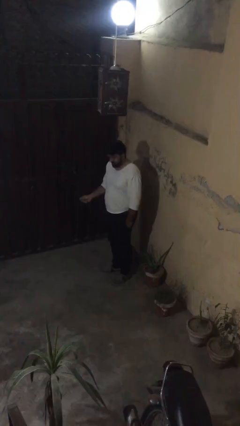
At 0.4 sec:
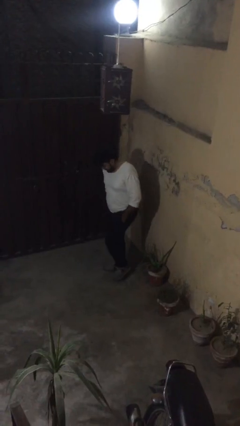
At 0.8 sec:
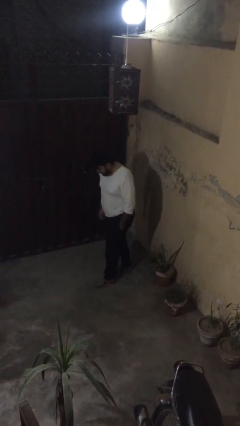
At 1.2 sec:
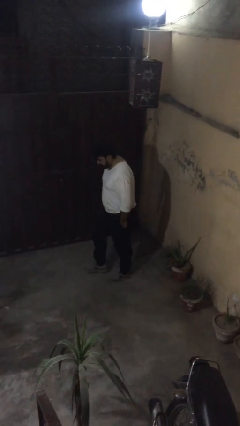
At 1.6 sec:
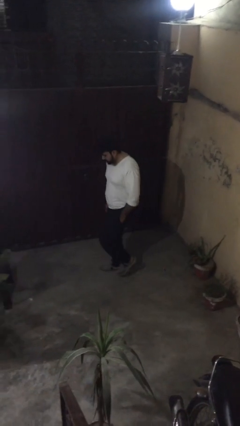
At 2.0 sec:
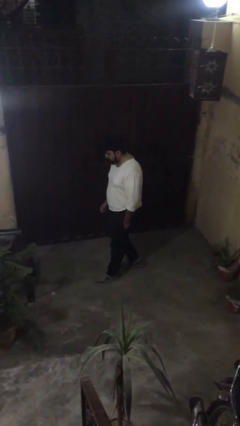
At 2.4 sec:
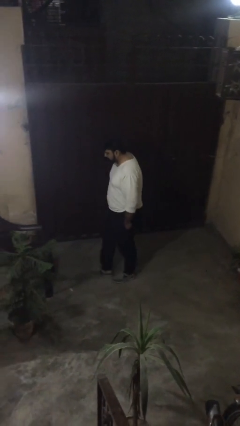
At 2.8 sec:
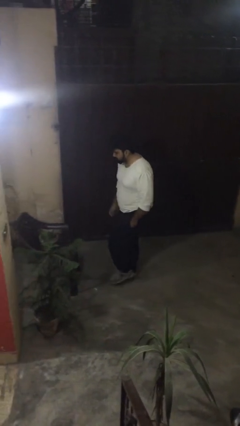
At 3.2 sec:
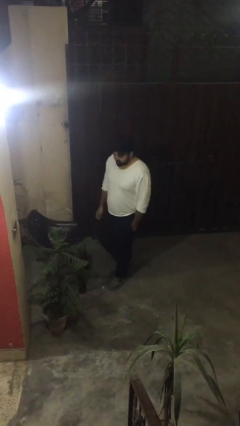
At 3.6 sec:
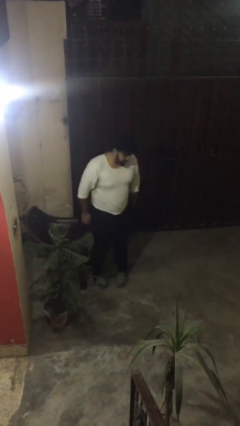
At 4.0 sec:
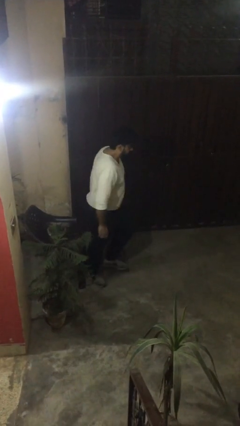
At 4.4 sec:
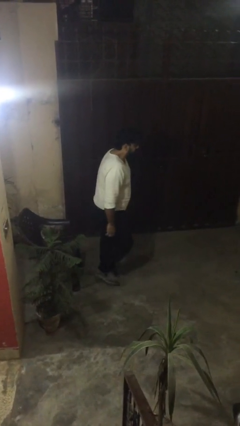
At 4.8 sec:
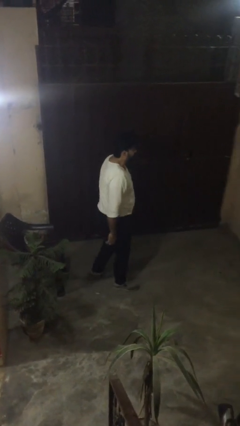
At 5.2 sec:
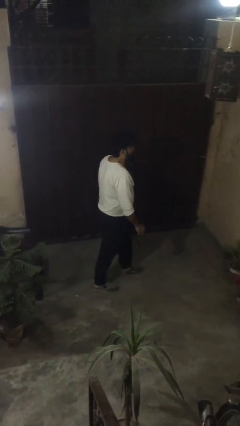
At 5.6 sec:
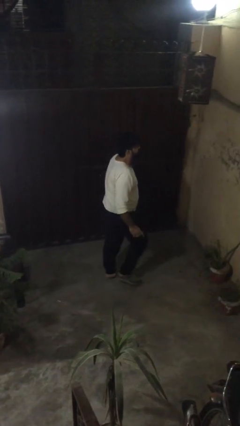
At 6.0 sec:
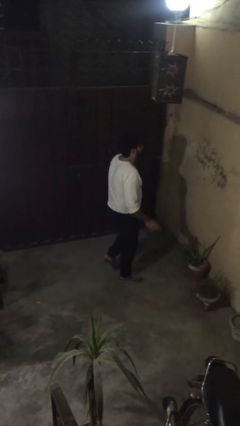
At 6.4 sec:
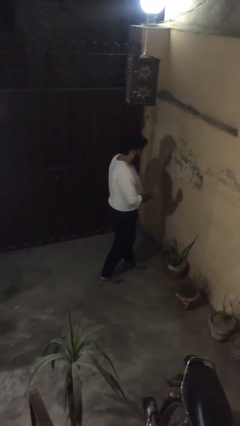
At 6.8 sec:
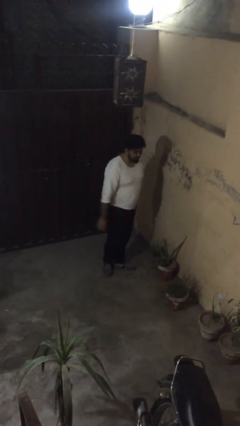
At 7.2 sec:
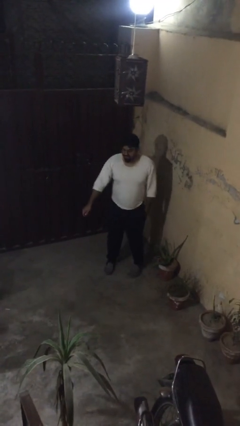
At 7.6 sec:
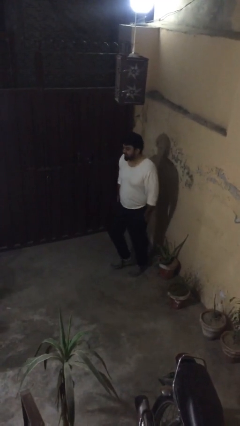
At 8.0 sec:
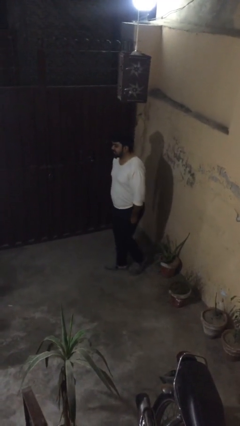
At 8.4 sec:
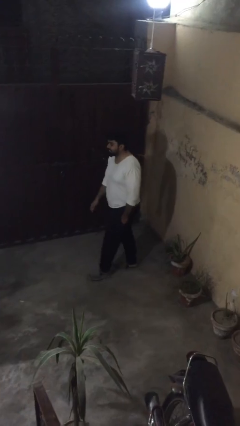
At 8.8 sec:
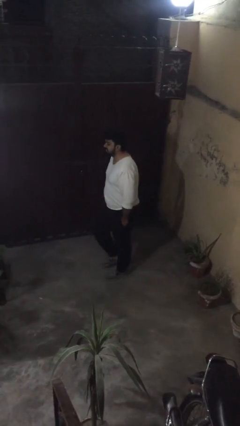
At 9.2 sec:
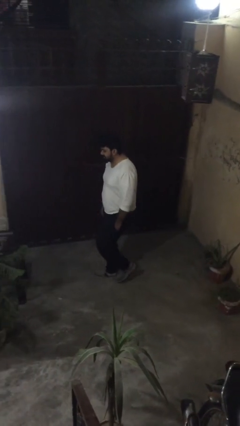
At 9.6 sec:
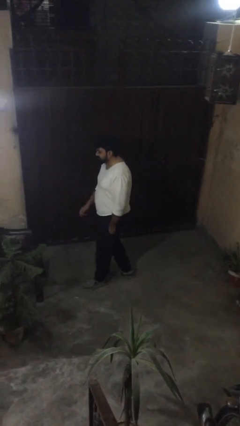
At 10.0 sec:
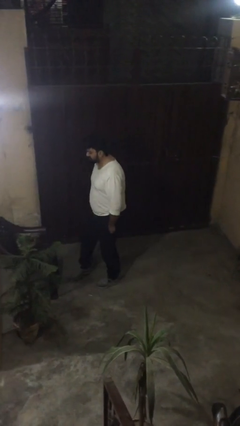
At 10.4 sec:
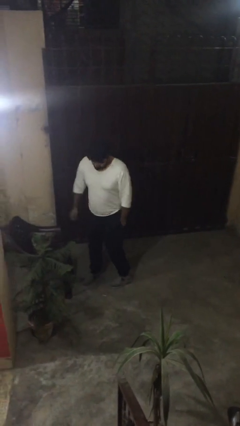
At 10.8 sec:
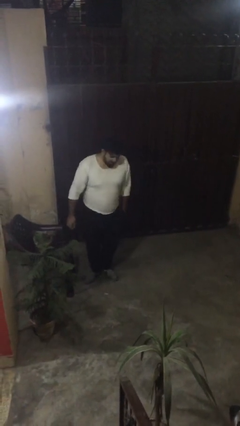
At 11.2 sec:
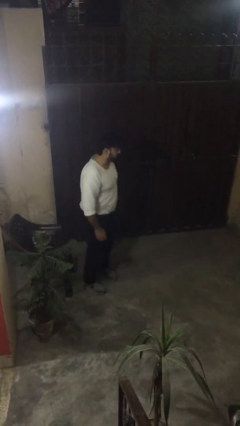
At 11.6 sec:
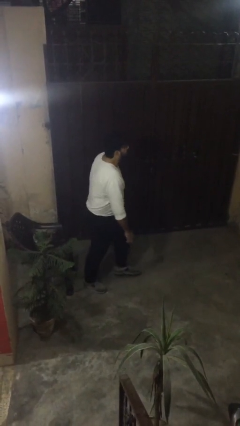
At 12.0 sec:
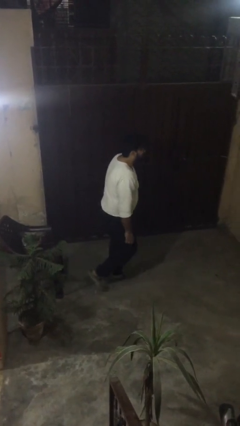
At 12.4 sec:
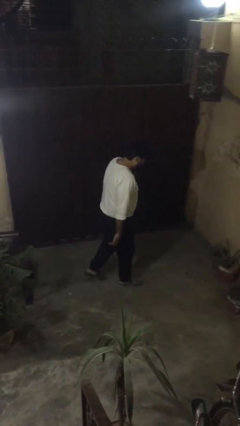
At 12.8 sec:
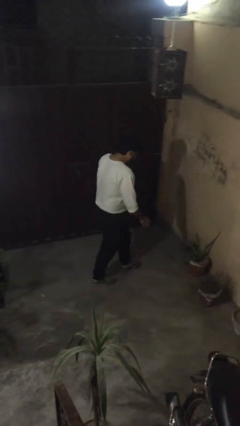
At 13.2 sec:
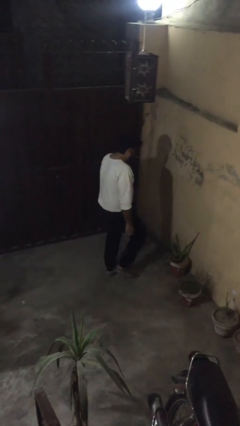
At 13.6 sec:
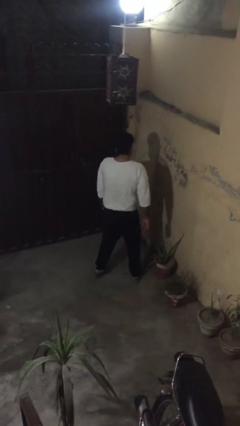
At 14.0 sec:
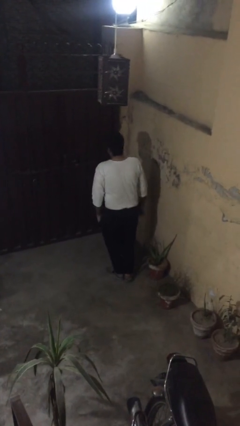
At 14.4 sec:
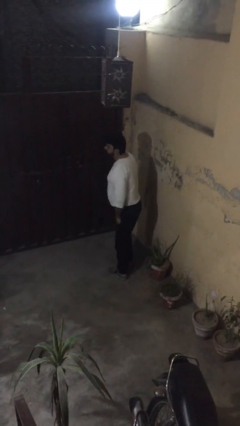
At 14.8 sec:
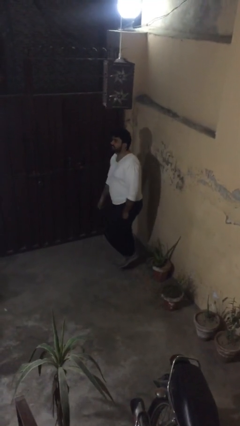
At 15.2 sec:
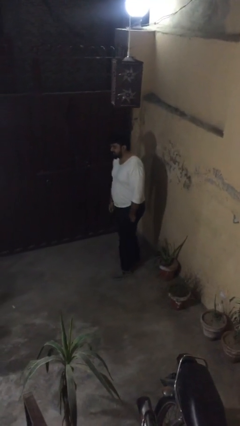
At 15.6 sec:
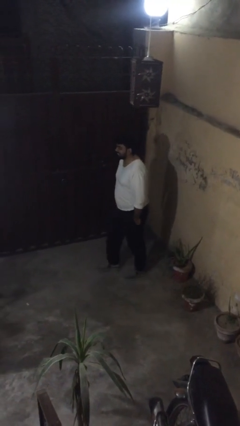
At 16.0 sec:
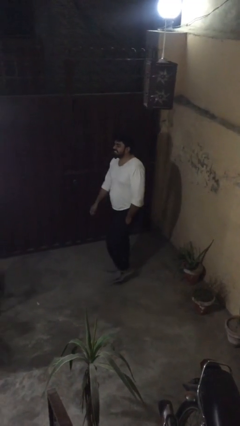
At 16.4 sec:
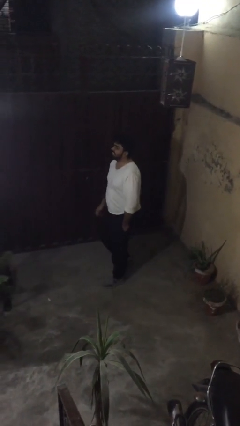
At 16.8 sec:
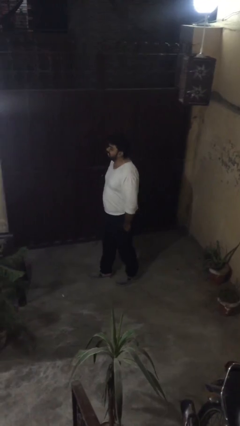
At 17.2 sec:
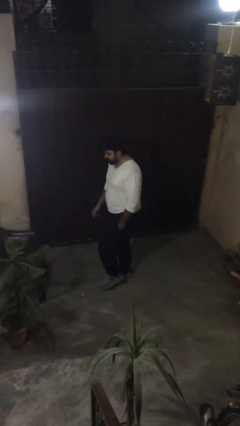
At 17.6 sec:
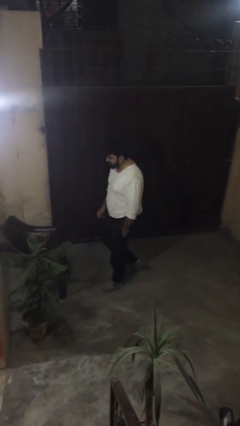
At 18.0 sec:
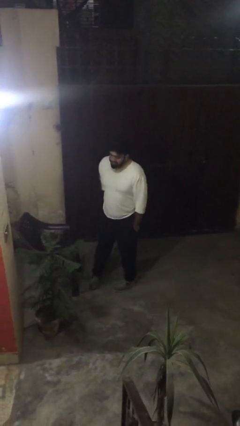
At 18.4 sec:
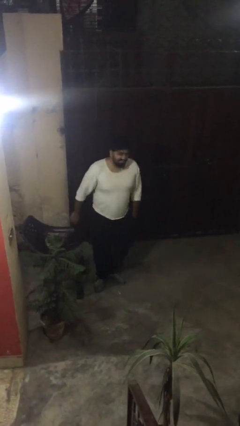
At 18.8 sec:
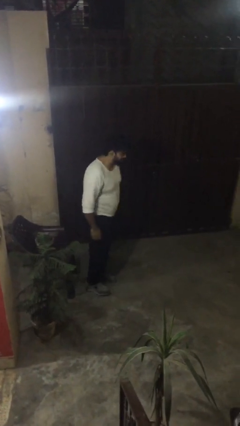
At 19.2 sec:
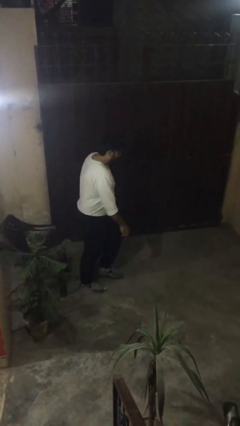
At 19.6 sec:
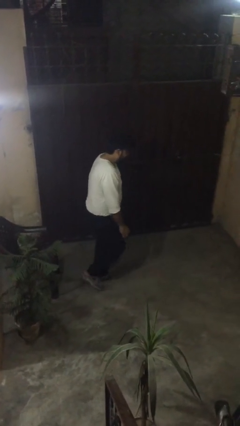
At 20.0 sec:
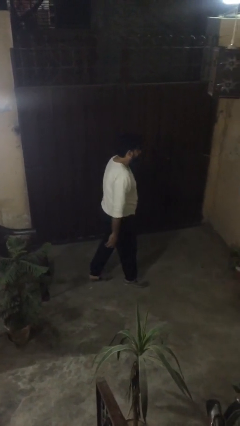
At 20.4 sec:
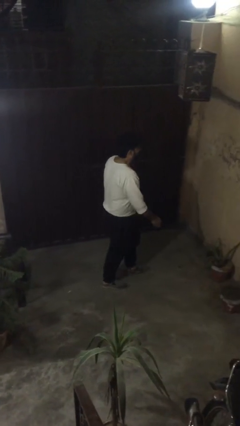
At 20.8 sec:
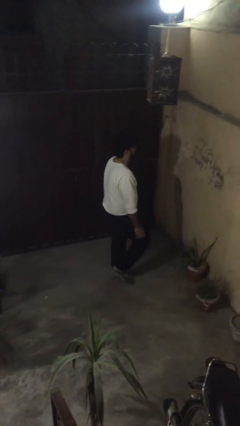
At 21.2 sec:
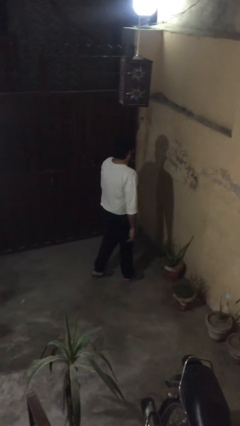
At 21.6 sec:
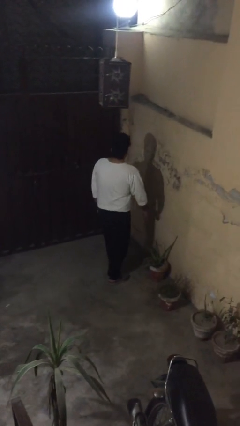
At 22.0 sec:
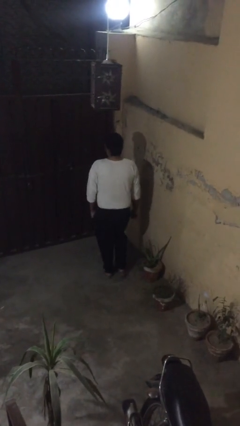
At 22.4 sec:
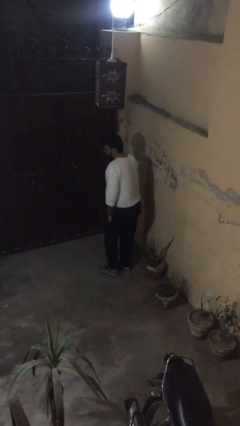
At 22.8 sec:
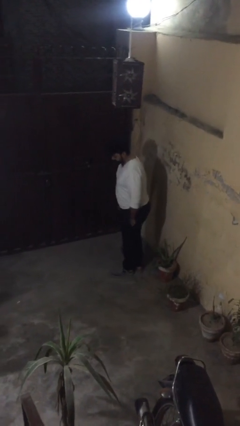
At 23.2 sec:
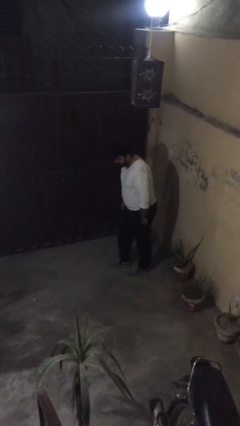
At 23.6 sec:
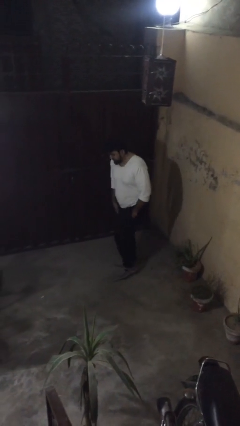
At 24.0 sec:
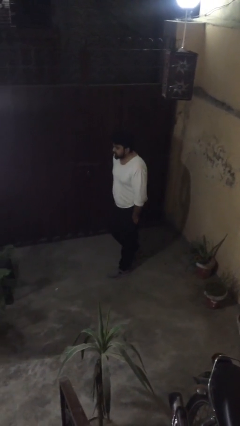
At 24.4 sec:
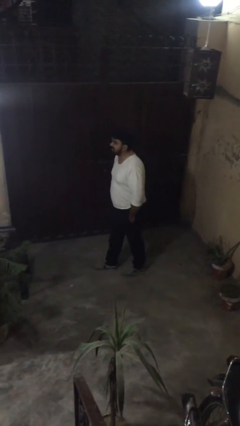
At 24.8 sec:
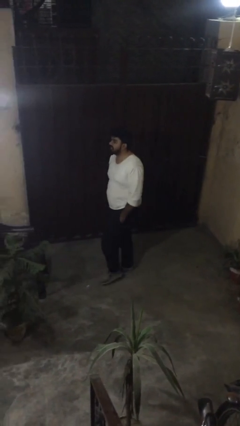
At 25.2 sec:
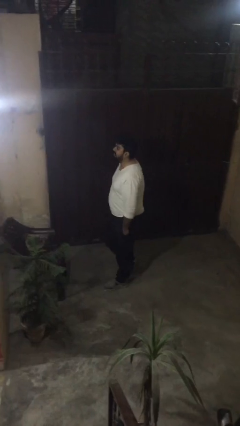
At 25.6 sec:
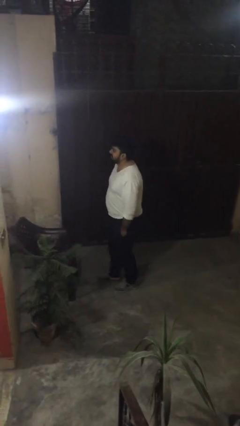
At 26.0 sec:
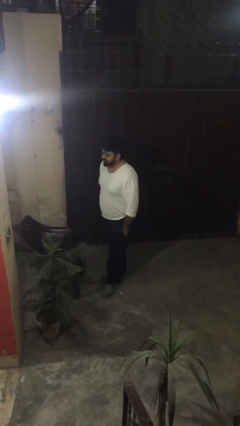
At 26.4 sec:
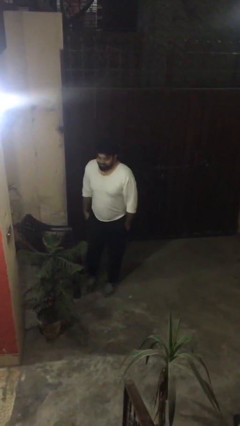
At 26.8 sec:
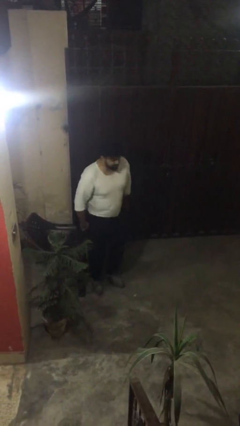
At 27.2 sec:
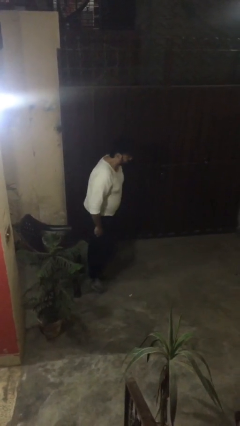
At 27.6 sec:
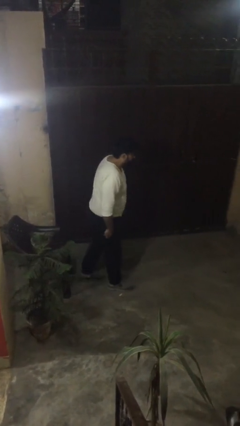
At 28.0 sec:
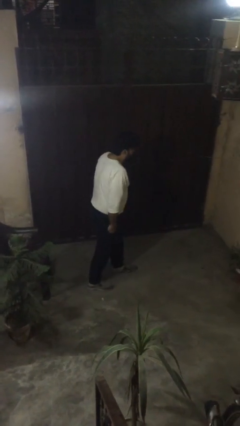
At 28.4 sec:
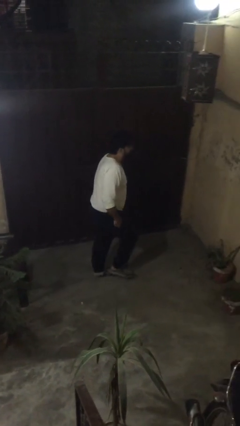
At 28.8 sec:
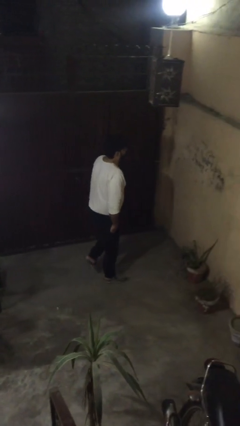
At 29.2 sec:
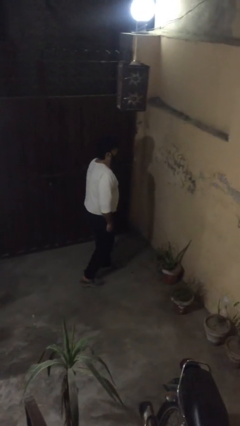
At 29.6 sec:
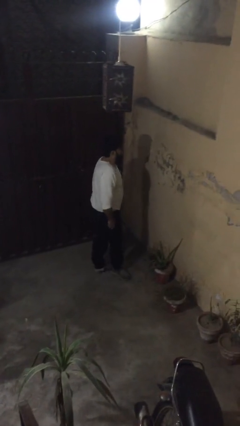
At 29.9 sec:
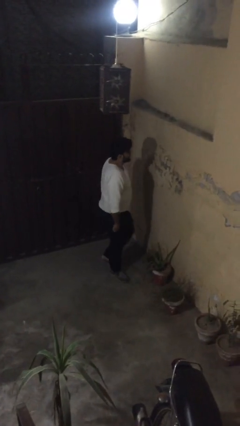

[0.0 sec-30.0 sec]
person walks

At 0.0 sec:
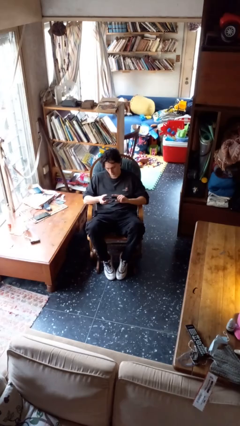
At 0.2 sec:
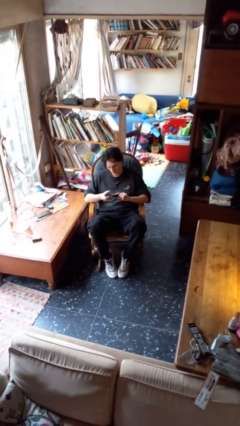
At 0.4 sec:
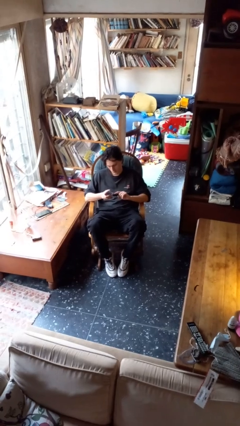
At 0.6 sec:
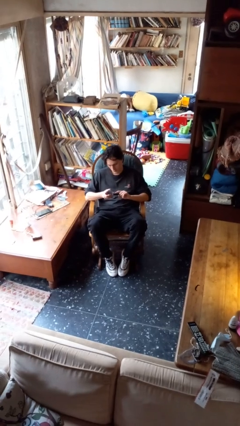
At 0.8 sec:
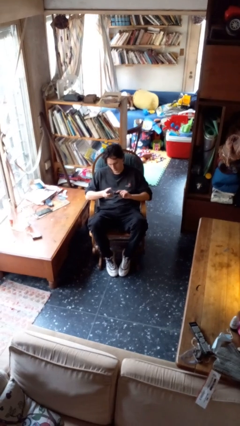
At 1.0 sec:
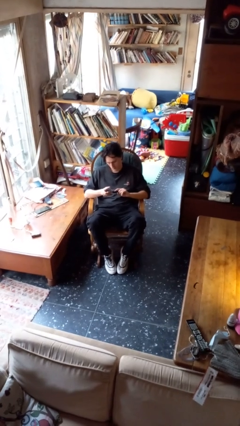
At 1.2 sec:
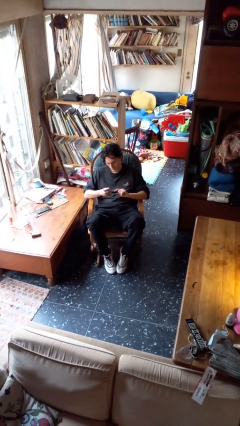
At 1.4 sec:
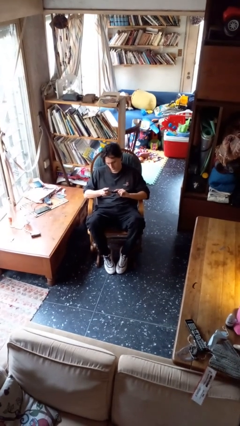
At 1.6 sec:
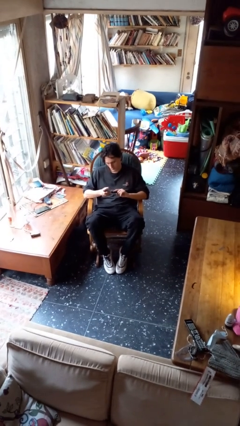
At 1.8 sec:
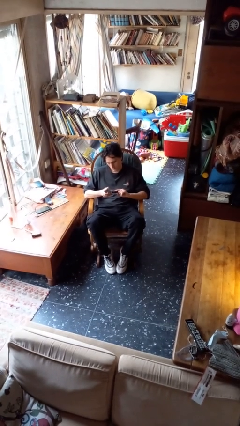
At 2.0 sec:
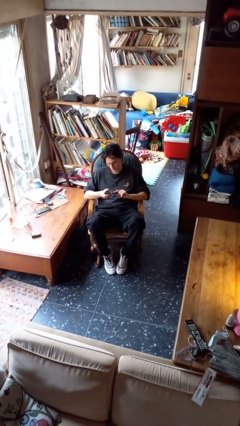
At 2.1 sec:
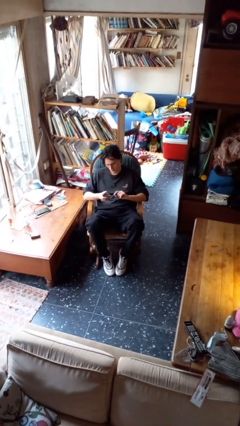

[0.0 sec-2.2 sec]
person clips fingernails

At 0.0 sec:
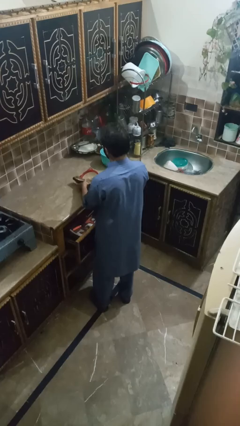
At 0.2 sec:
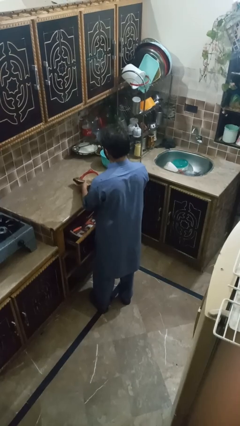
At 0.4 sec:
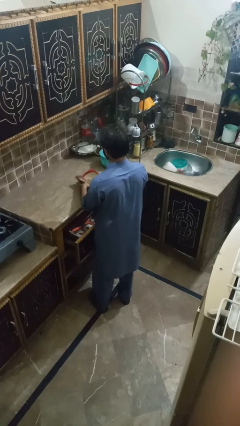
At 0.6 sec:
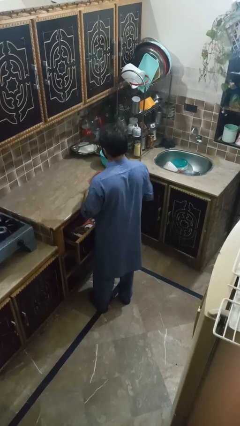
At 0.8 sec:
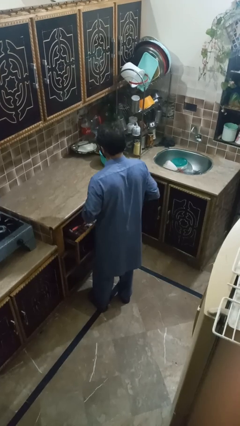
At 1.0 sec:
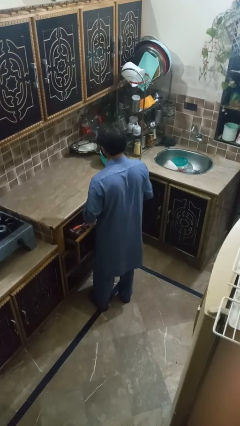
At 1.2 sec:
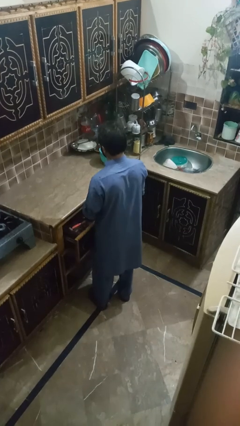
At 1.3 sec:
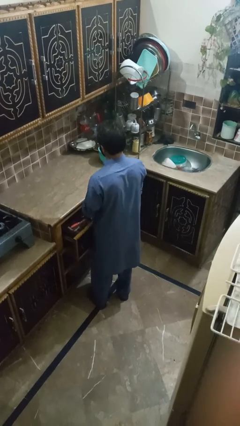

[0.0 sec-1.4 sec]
person puts object into kitchen drawer
